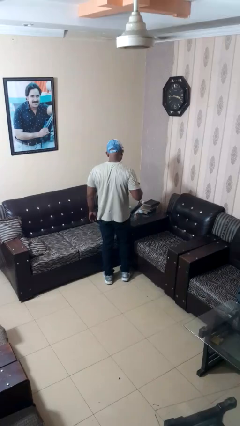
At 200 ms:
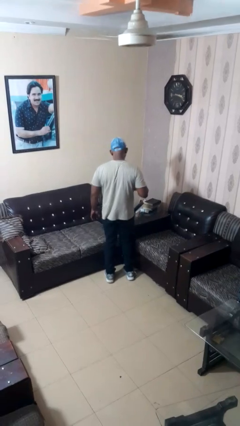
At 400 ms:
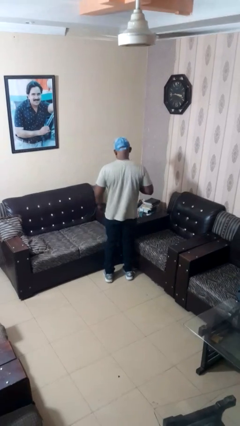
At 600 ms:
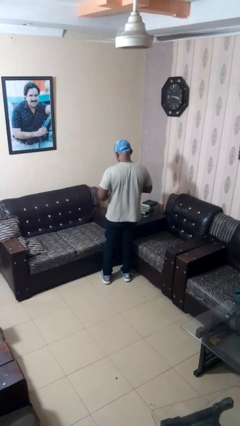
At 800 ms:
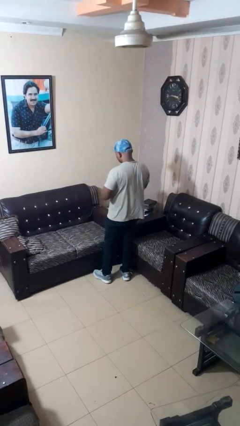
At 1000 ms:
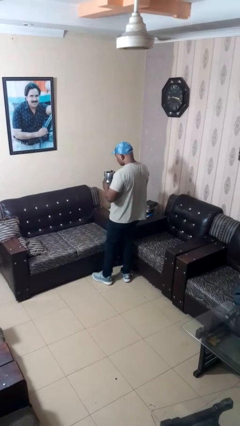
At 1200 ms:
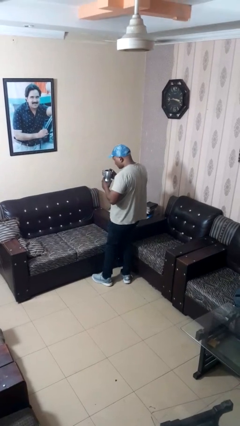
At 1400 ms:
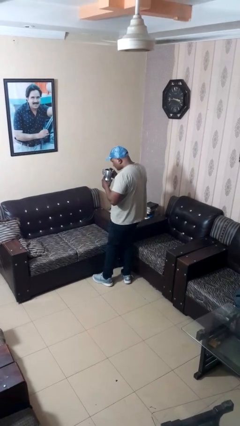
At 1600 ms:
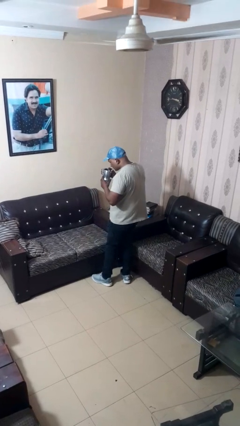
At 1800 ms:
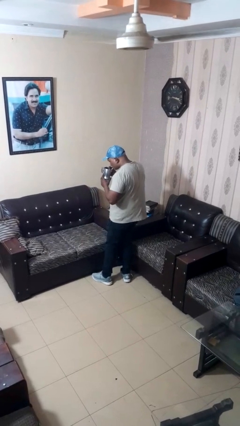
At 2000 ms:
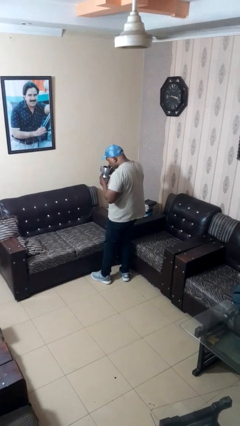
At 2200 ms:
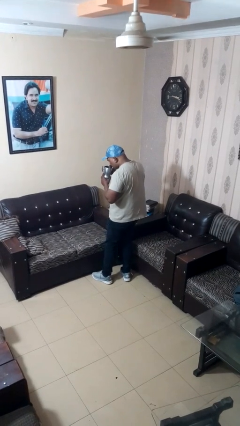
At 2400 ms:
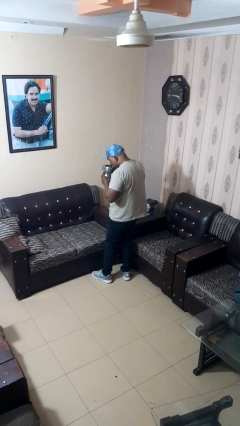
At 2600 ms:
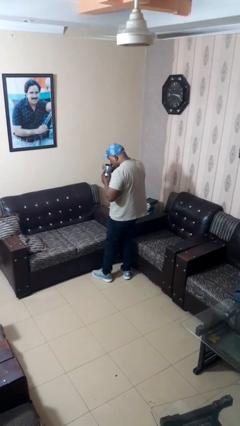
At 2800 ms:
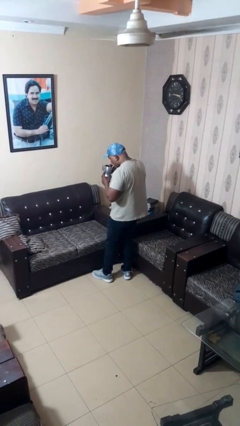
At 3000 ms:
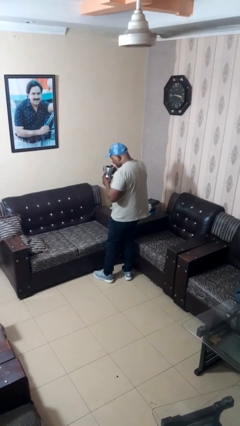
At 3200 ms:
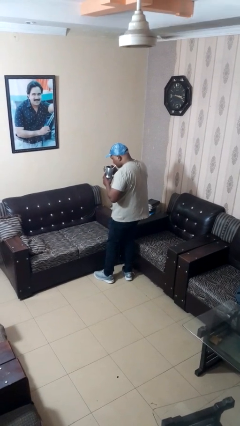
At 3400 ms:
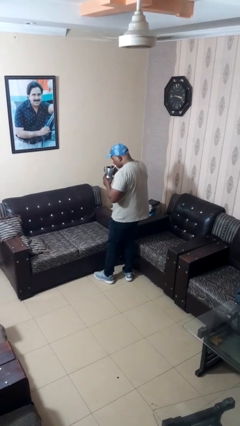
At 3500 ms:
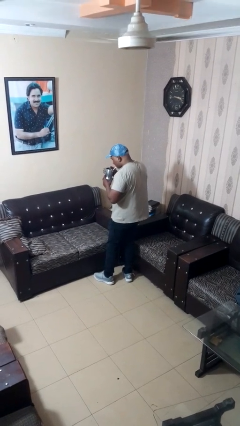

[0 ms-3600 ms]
person drinks from straw

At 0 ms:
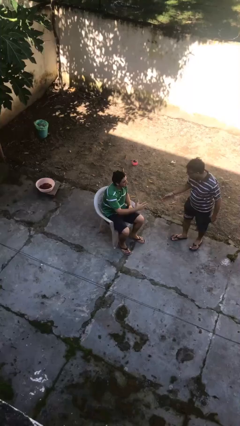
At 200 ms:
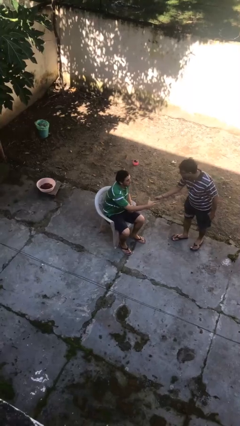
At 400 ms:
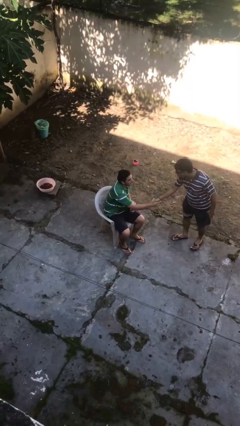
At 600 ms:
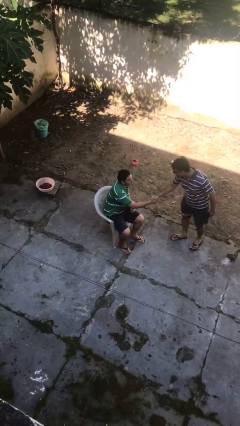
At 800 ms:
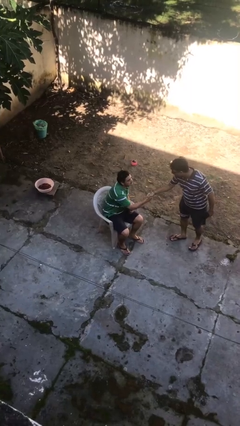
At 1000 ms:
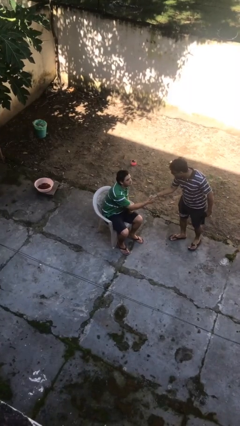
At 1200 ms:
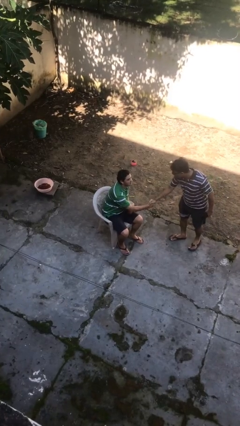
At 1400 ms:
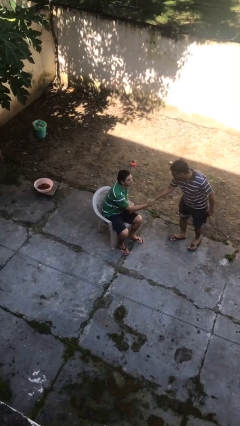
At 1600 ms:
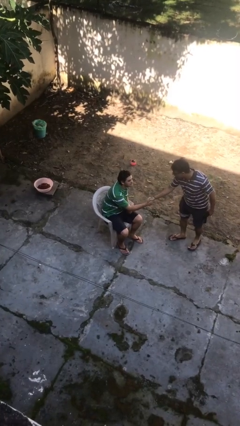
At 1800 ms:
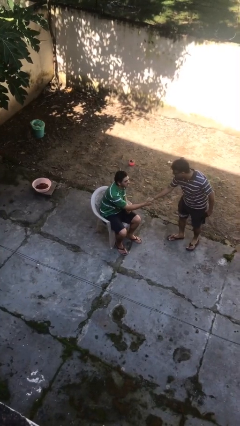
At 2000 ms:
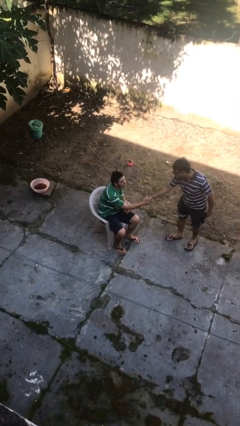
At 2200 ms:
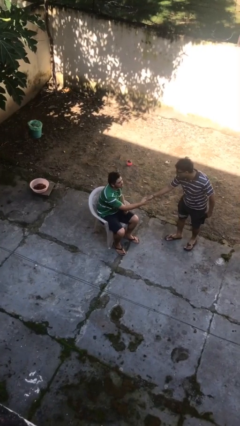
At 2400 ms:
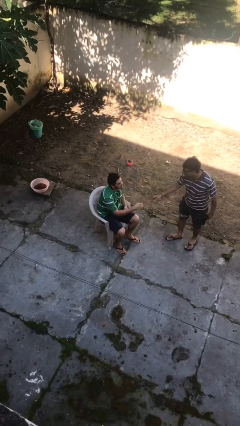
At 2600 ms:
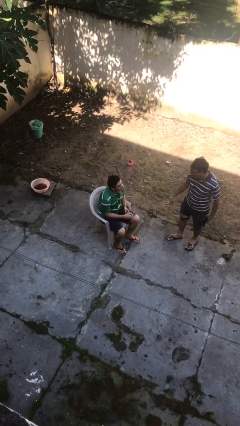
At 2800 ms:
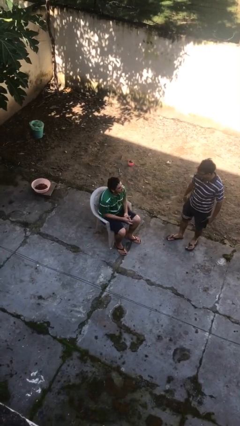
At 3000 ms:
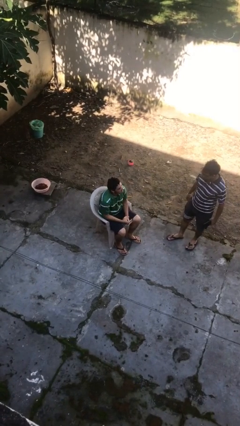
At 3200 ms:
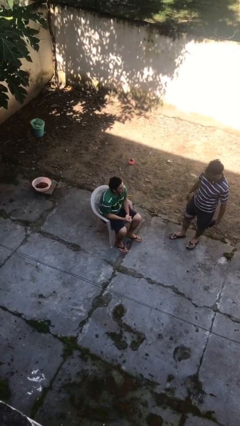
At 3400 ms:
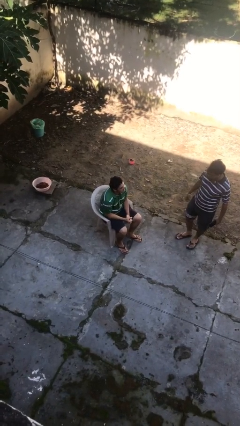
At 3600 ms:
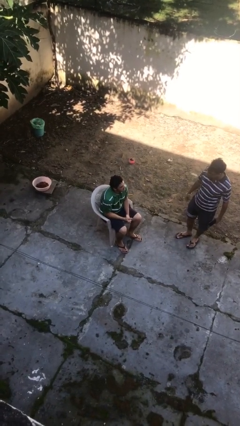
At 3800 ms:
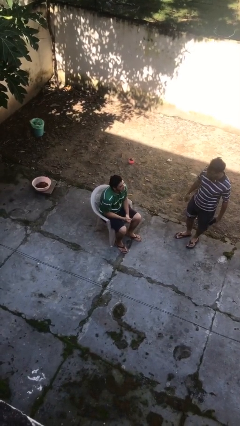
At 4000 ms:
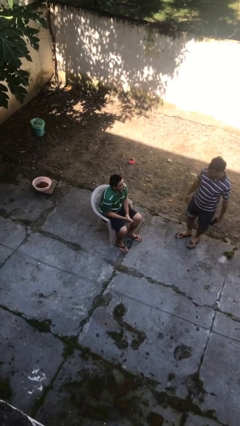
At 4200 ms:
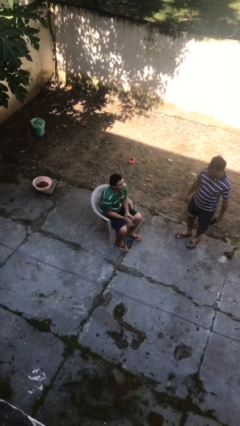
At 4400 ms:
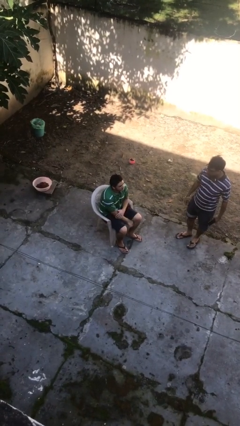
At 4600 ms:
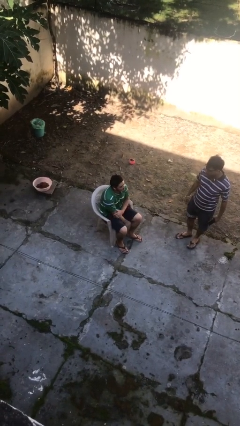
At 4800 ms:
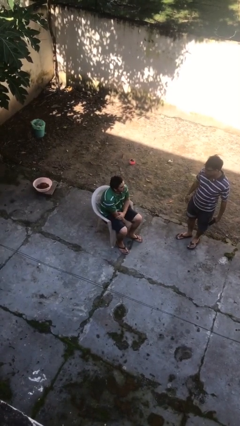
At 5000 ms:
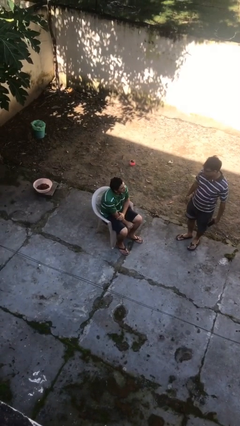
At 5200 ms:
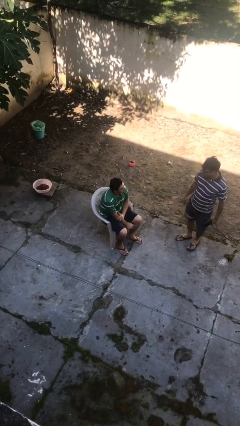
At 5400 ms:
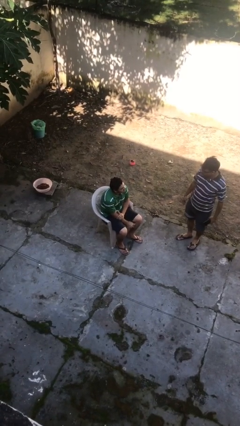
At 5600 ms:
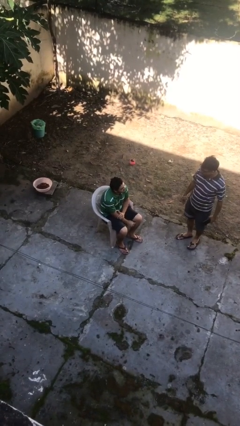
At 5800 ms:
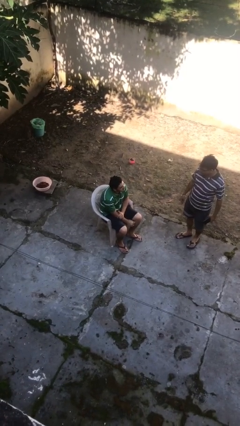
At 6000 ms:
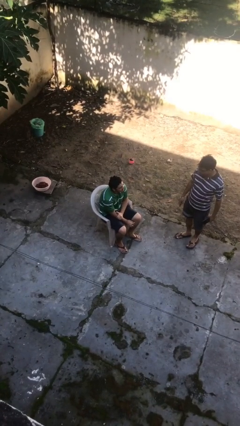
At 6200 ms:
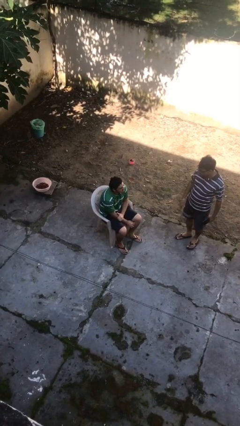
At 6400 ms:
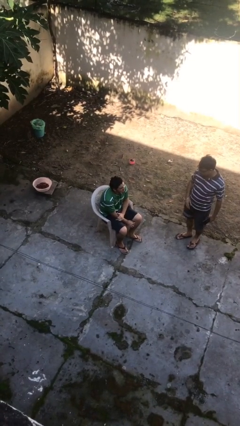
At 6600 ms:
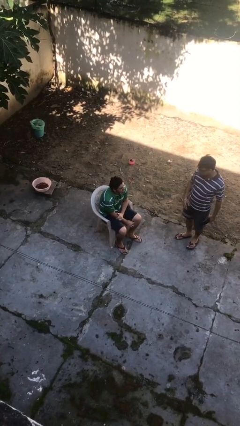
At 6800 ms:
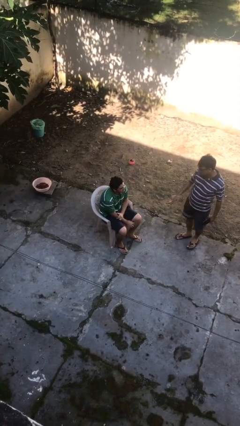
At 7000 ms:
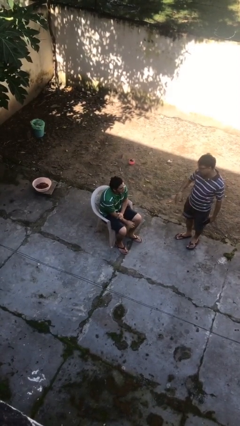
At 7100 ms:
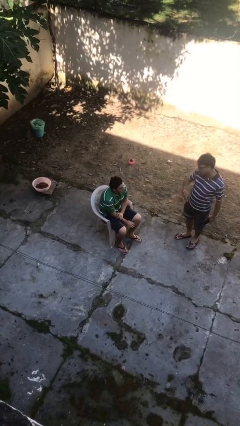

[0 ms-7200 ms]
person shakes hand

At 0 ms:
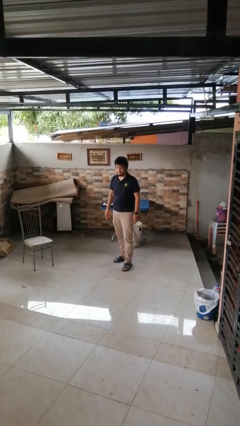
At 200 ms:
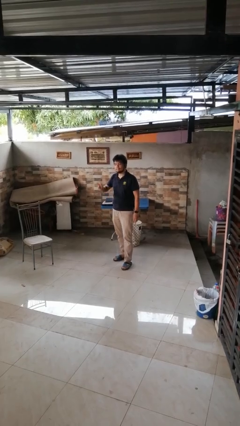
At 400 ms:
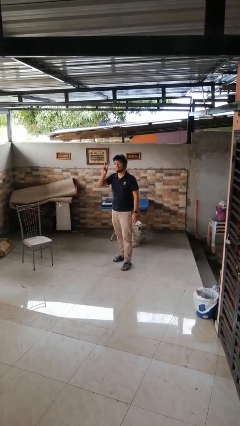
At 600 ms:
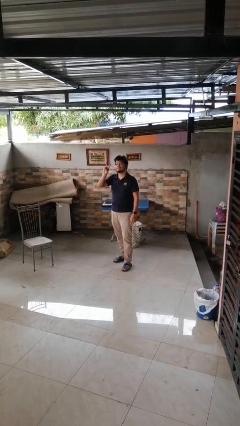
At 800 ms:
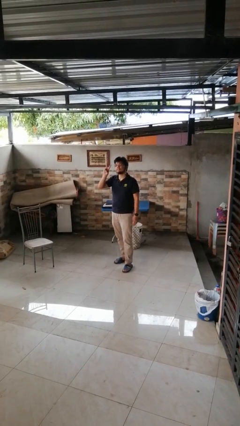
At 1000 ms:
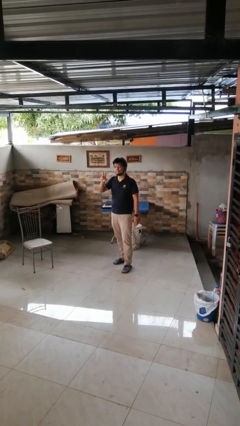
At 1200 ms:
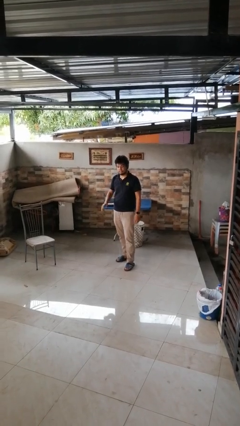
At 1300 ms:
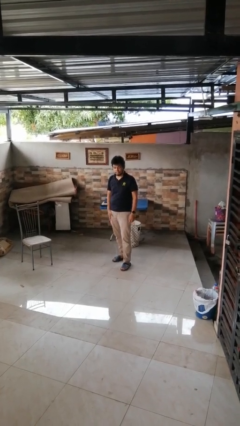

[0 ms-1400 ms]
person gestures peace

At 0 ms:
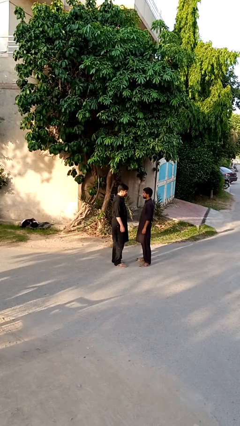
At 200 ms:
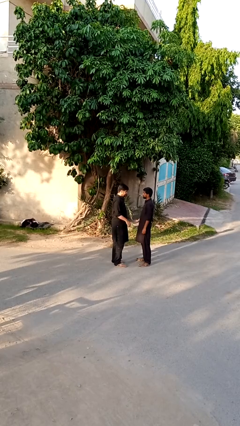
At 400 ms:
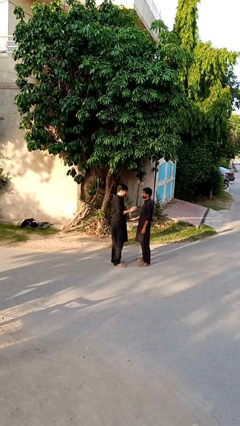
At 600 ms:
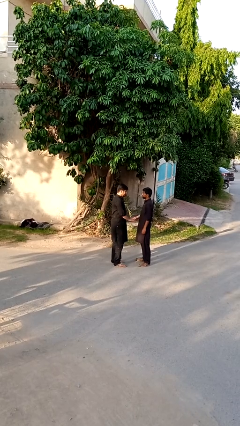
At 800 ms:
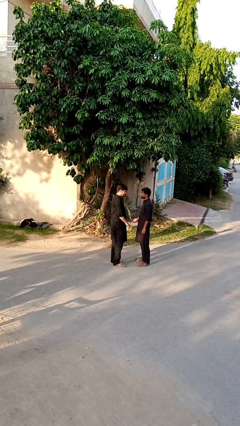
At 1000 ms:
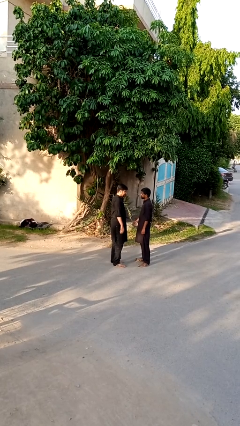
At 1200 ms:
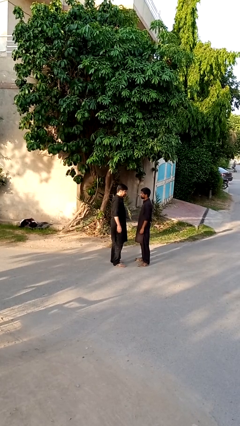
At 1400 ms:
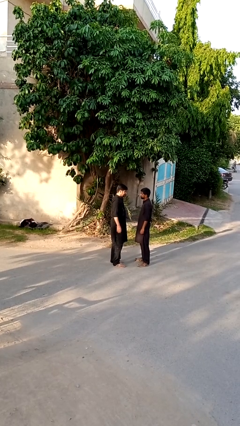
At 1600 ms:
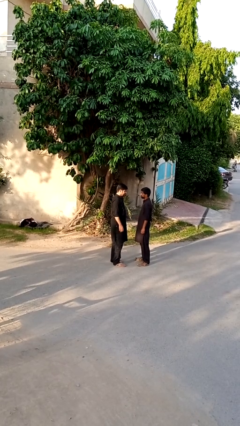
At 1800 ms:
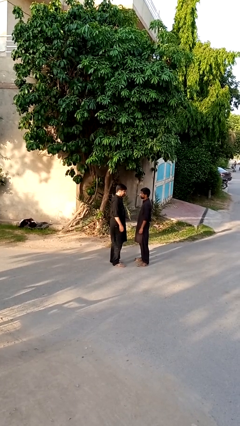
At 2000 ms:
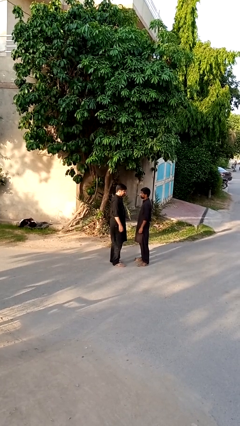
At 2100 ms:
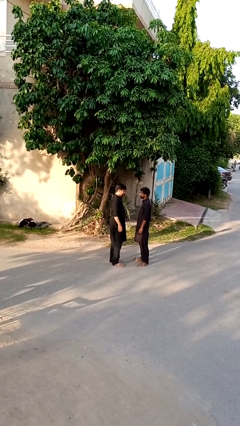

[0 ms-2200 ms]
person highfives hand

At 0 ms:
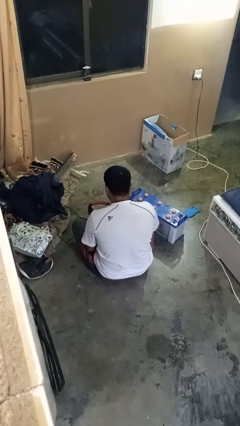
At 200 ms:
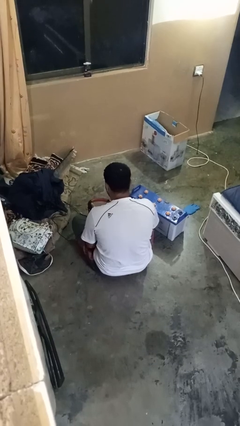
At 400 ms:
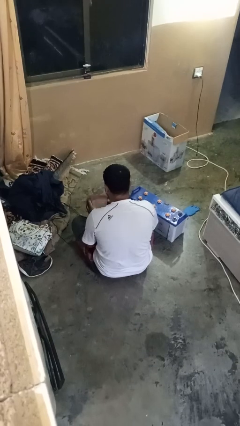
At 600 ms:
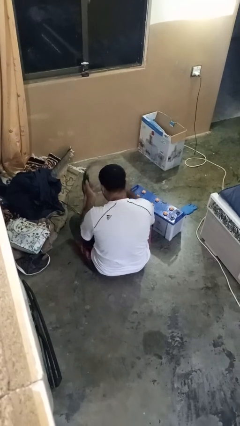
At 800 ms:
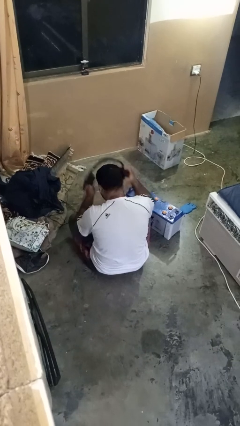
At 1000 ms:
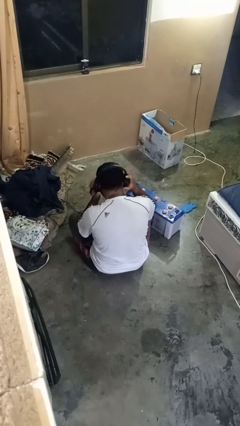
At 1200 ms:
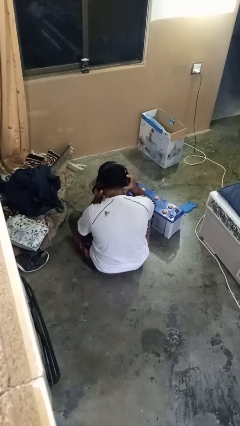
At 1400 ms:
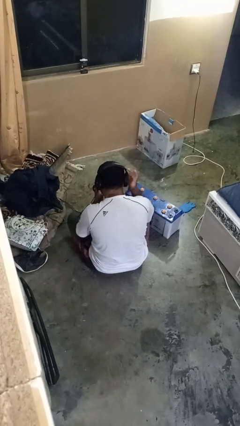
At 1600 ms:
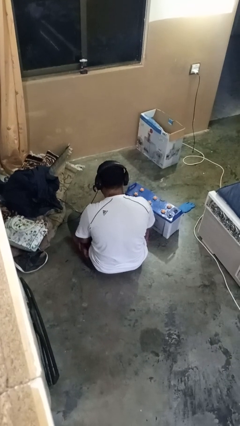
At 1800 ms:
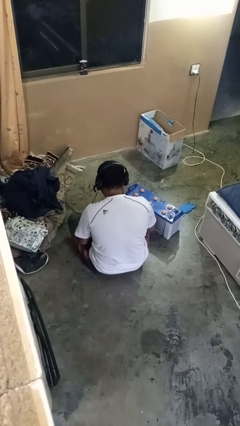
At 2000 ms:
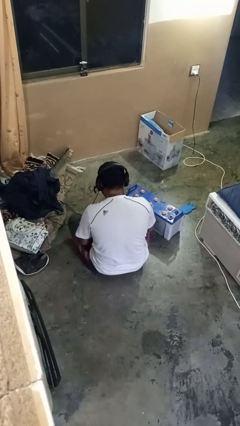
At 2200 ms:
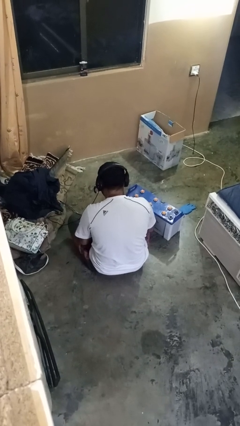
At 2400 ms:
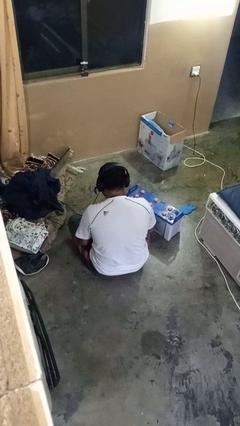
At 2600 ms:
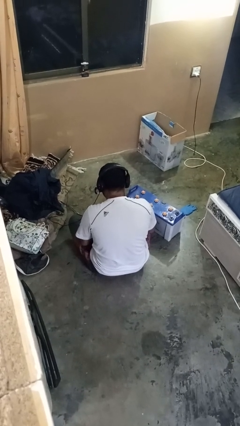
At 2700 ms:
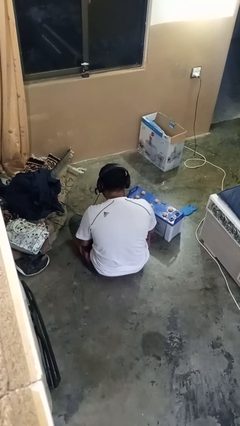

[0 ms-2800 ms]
person puts on headphones
